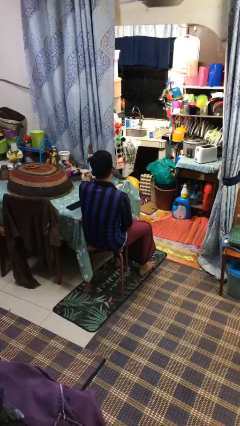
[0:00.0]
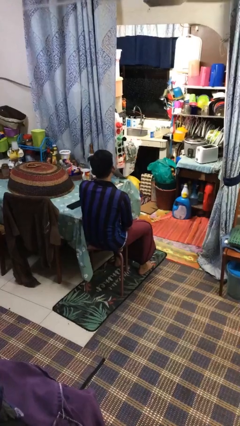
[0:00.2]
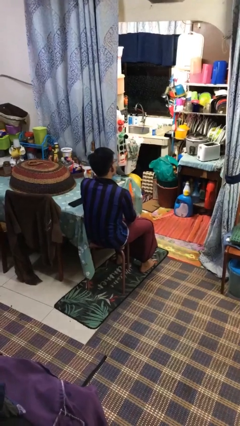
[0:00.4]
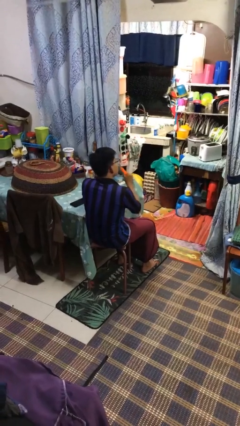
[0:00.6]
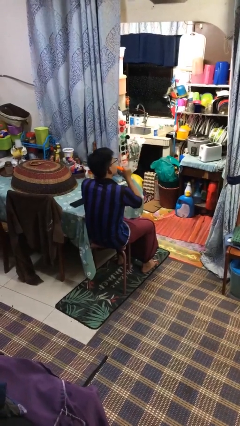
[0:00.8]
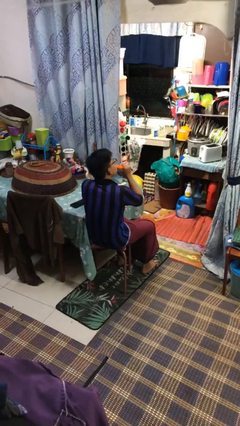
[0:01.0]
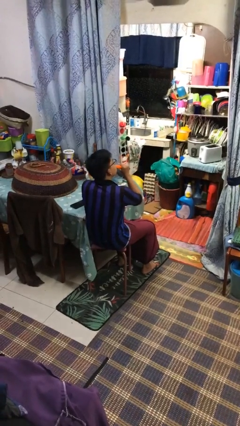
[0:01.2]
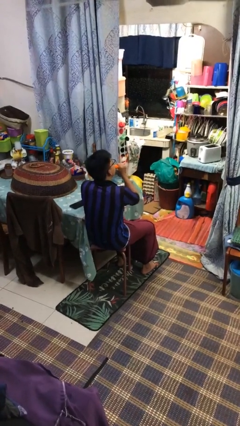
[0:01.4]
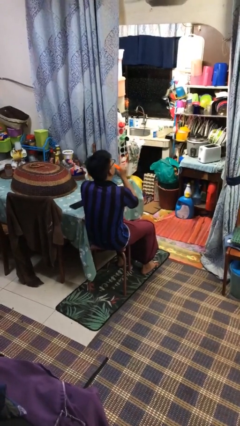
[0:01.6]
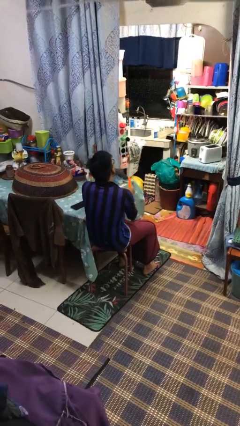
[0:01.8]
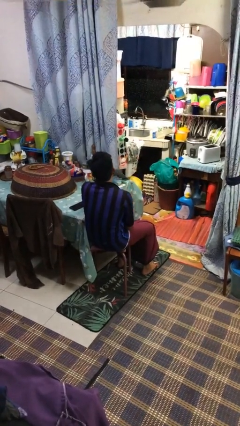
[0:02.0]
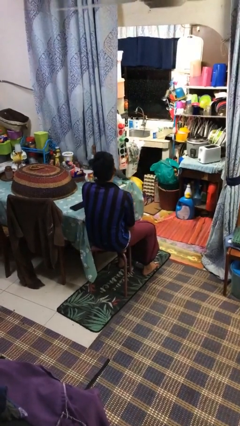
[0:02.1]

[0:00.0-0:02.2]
person vapes

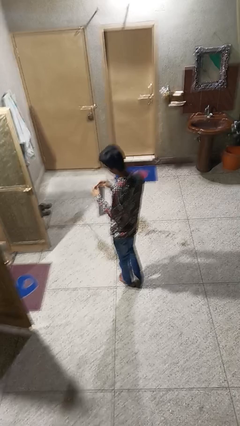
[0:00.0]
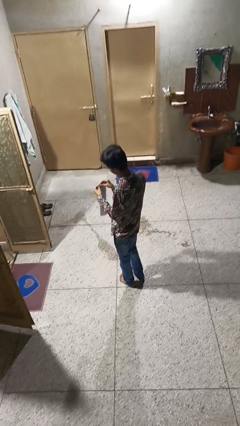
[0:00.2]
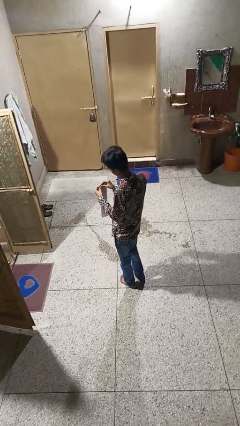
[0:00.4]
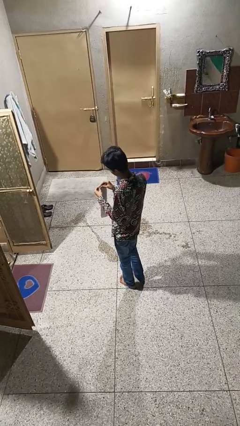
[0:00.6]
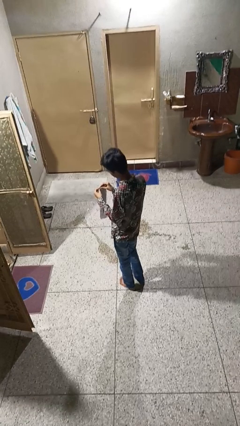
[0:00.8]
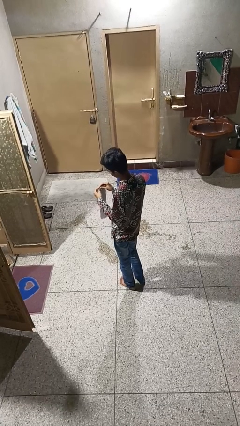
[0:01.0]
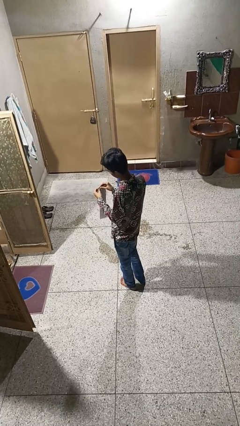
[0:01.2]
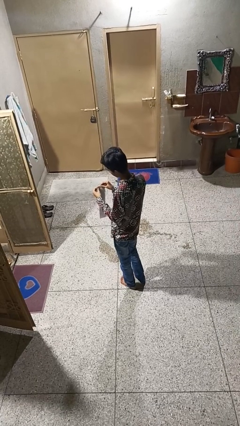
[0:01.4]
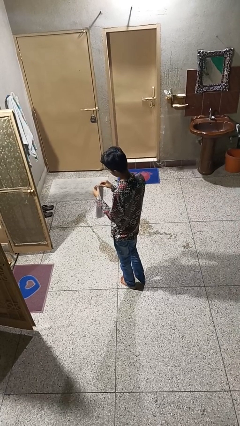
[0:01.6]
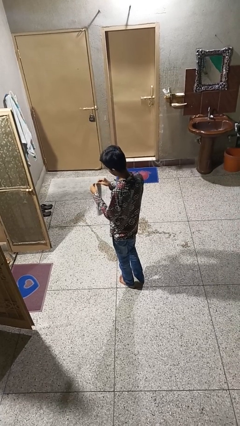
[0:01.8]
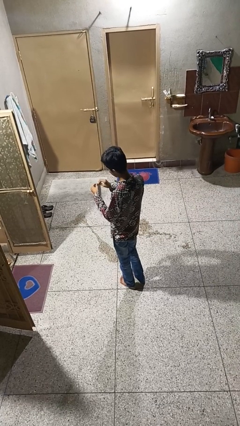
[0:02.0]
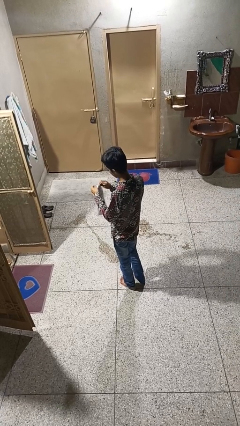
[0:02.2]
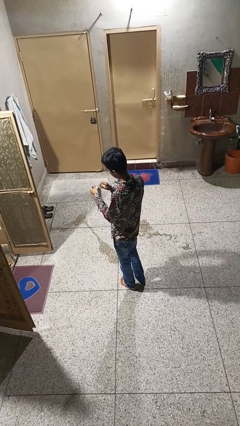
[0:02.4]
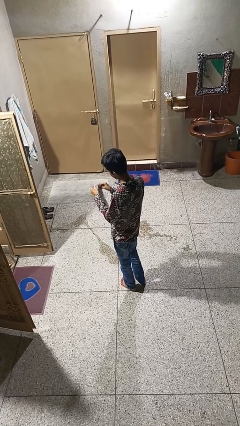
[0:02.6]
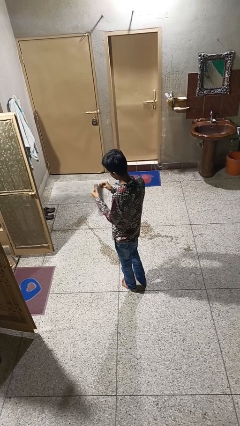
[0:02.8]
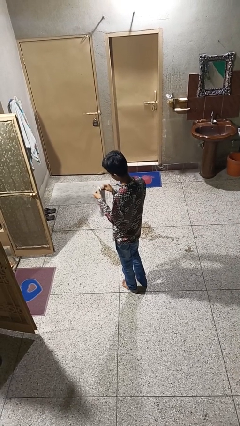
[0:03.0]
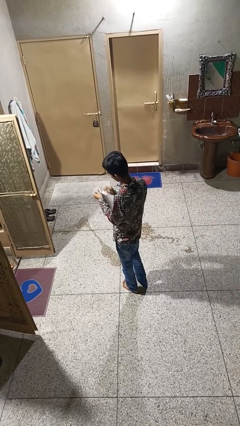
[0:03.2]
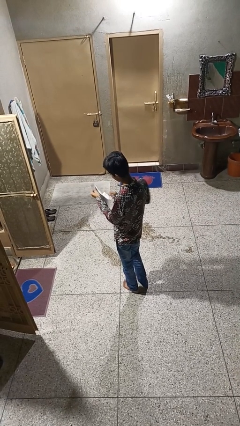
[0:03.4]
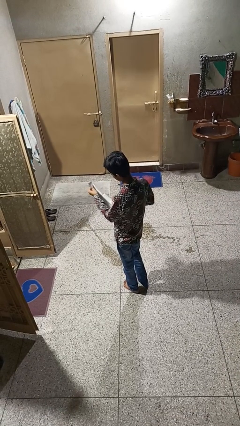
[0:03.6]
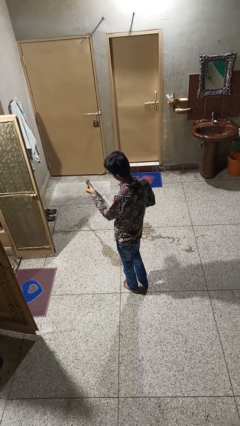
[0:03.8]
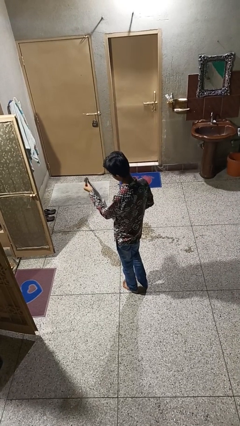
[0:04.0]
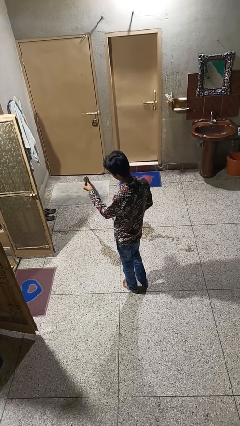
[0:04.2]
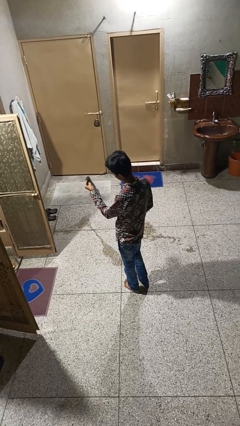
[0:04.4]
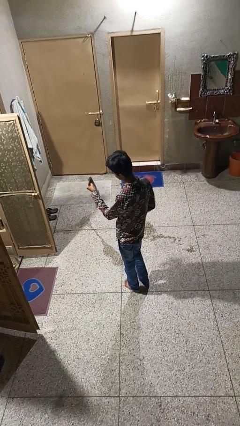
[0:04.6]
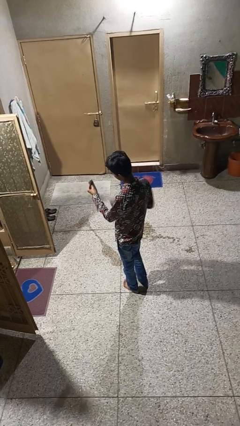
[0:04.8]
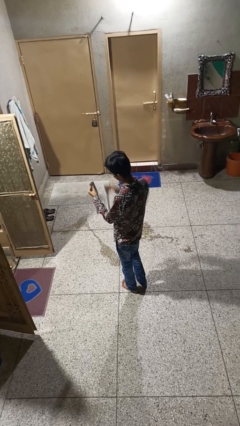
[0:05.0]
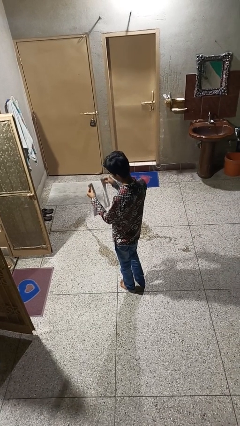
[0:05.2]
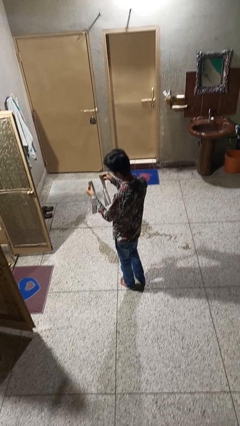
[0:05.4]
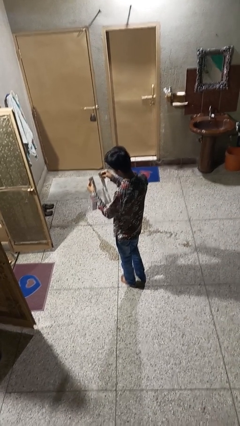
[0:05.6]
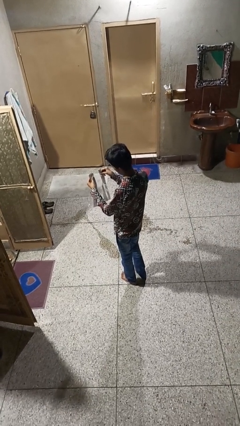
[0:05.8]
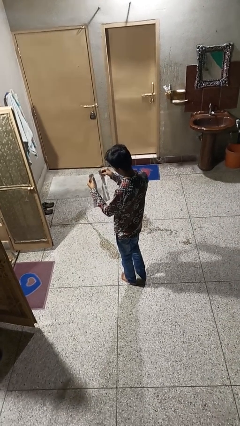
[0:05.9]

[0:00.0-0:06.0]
person tears paper

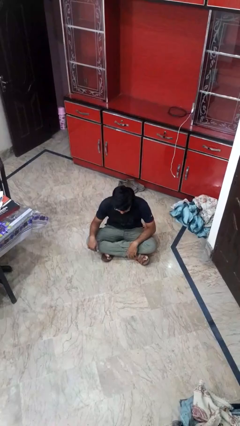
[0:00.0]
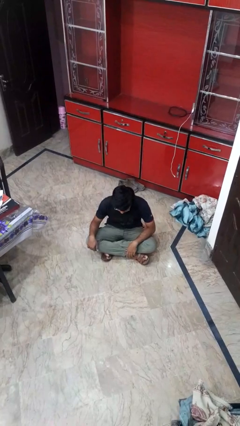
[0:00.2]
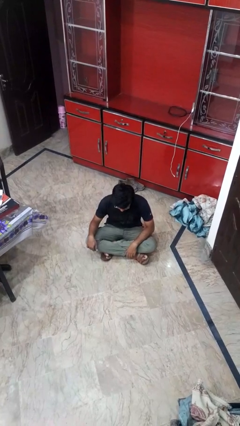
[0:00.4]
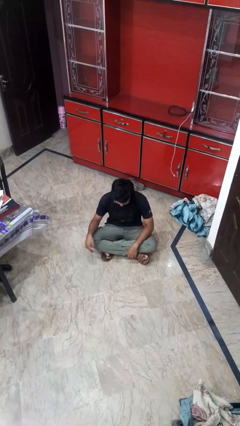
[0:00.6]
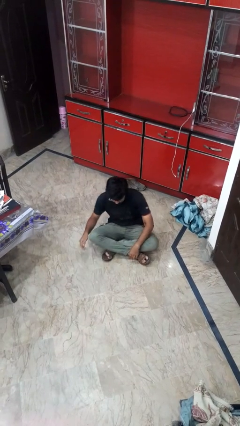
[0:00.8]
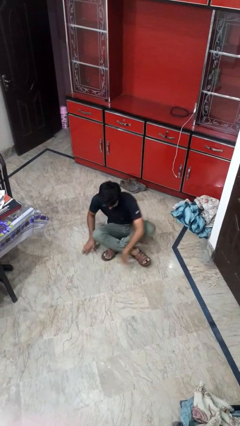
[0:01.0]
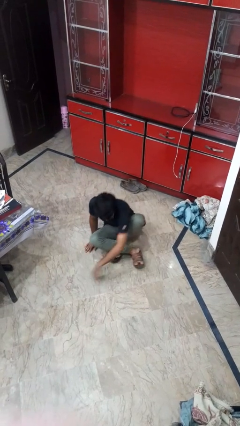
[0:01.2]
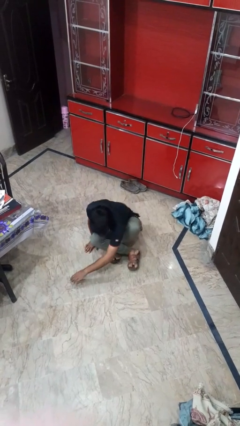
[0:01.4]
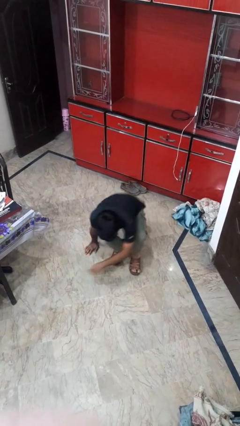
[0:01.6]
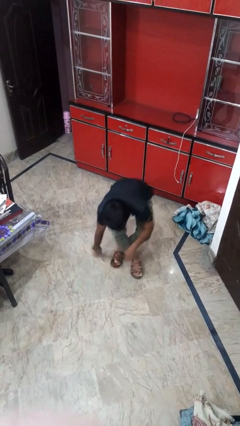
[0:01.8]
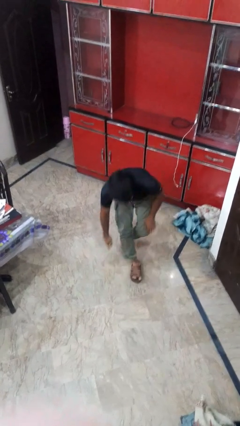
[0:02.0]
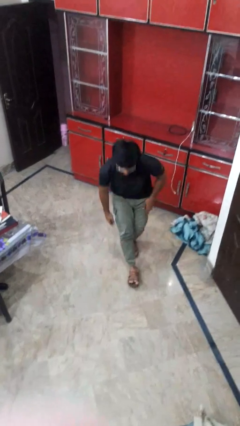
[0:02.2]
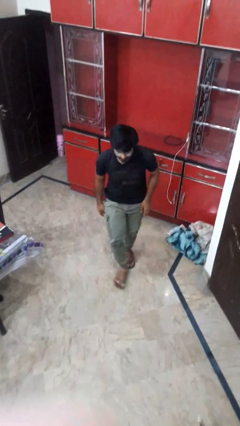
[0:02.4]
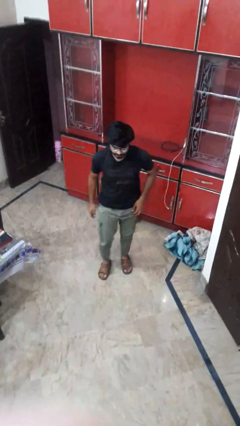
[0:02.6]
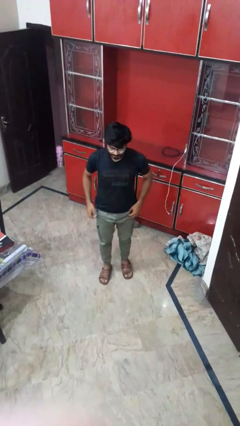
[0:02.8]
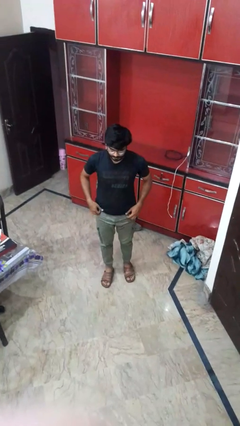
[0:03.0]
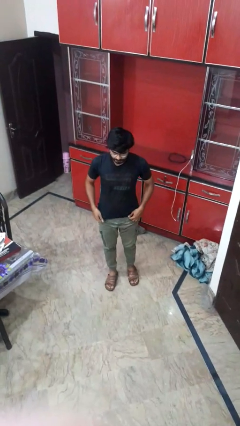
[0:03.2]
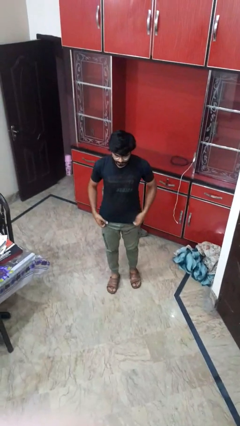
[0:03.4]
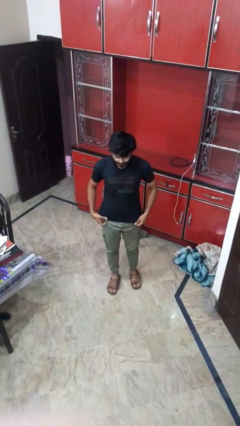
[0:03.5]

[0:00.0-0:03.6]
person stands up from floor

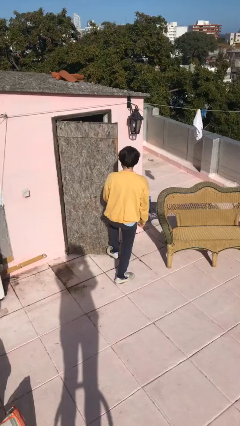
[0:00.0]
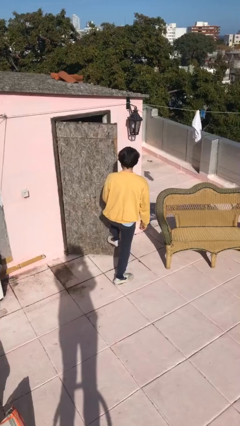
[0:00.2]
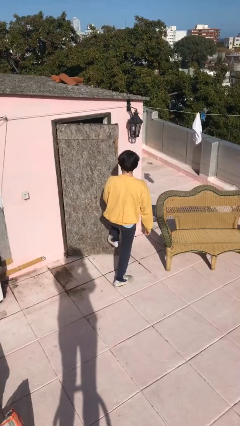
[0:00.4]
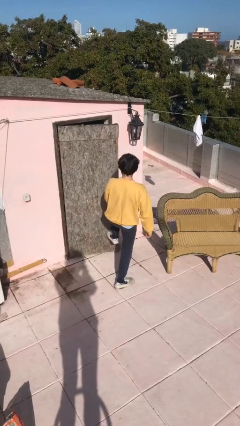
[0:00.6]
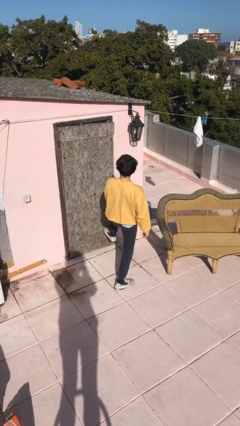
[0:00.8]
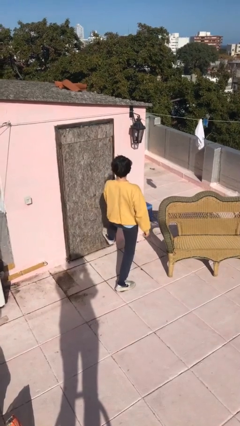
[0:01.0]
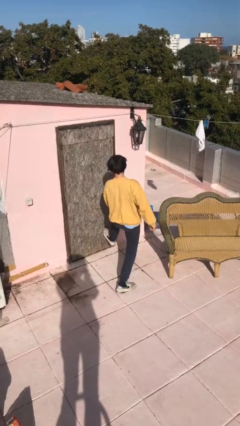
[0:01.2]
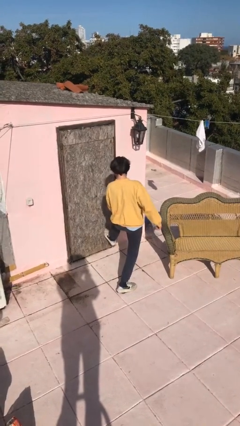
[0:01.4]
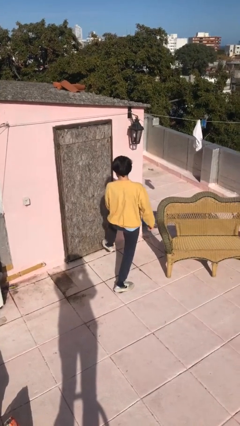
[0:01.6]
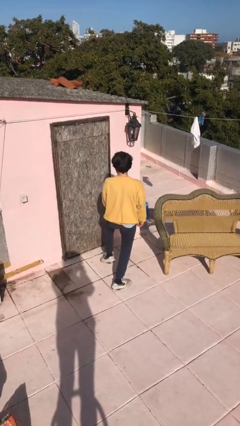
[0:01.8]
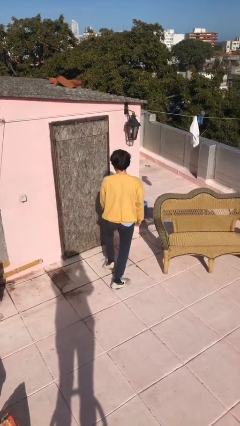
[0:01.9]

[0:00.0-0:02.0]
person closes door with foot

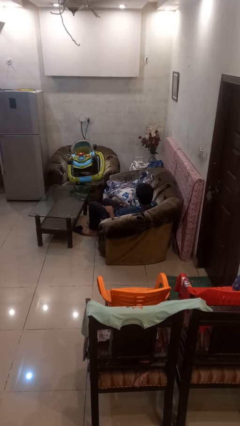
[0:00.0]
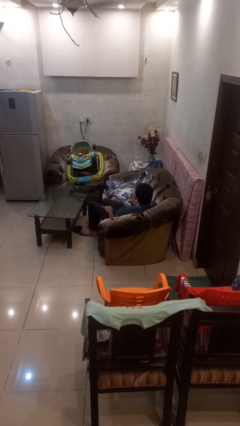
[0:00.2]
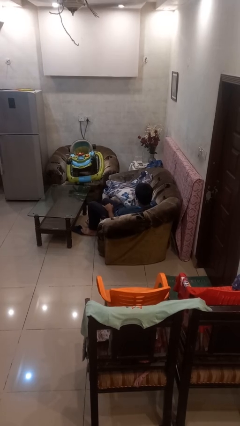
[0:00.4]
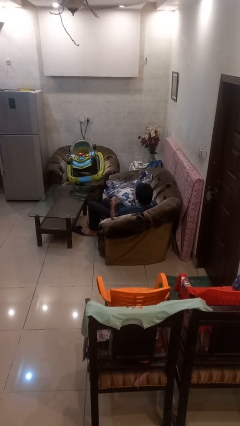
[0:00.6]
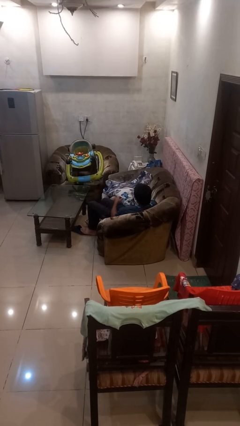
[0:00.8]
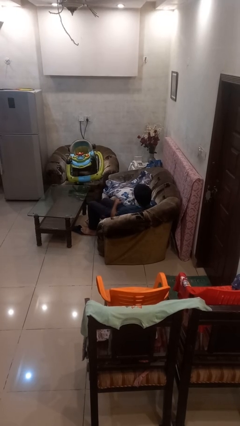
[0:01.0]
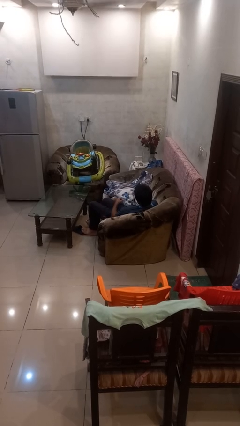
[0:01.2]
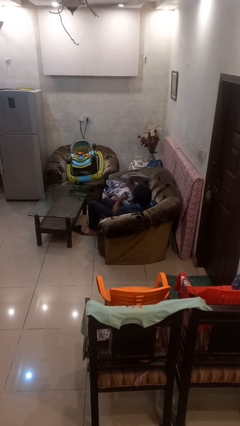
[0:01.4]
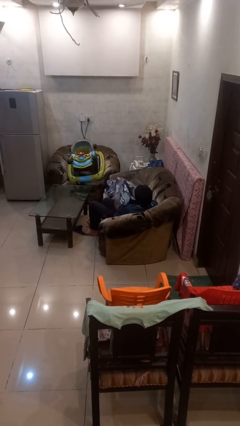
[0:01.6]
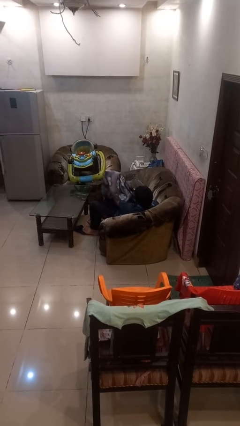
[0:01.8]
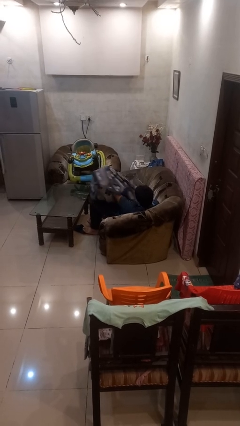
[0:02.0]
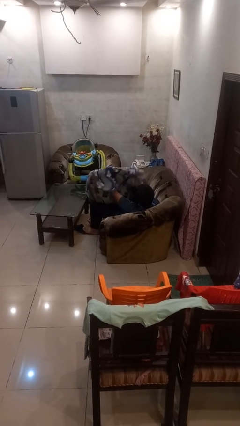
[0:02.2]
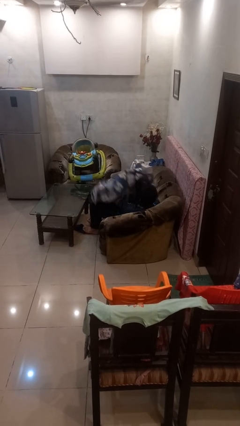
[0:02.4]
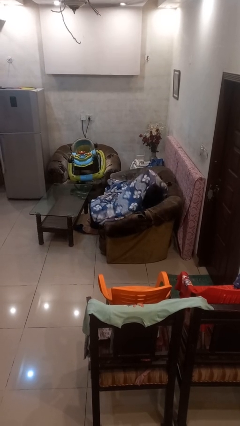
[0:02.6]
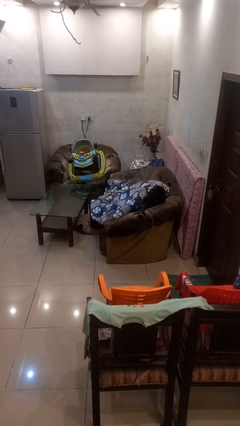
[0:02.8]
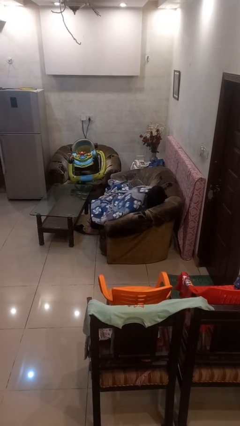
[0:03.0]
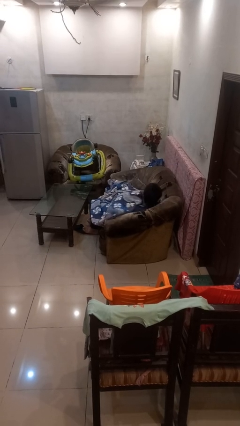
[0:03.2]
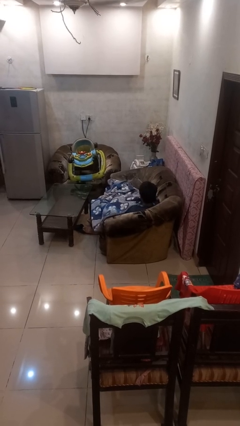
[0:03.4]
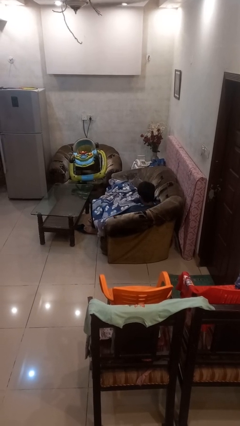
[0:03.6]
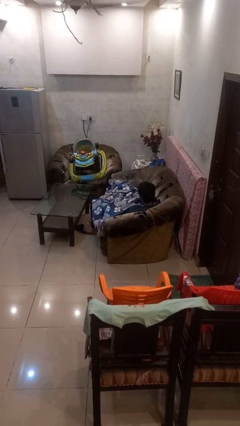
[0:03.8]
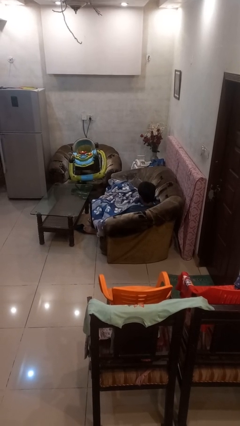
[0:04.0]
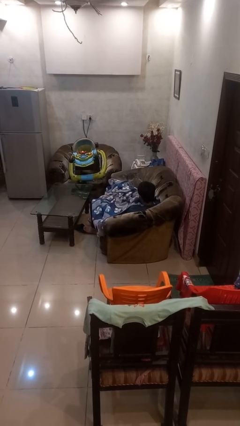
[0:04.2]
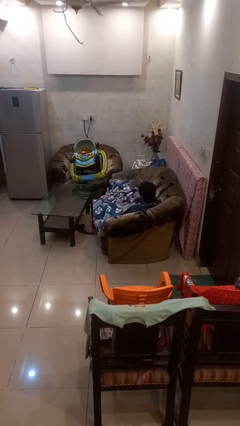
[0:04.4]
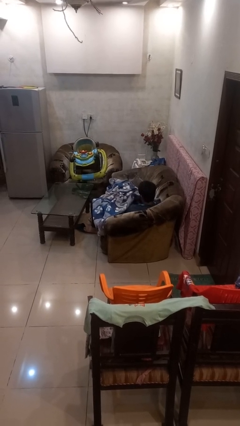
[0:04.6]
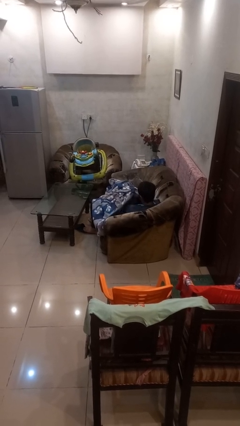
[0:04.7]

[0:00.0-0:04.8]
person covers with blanket
